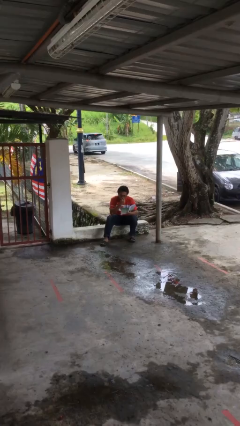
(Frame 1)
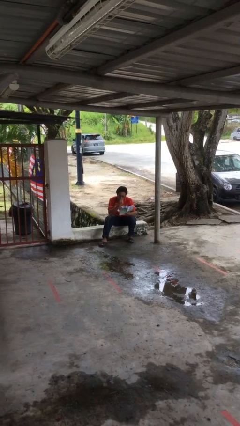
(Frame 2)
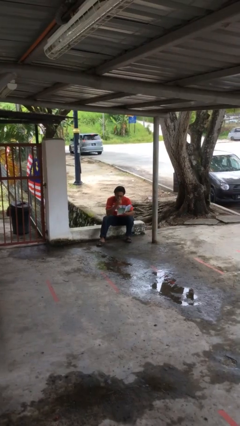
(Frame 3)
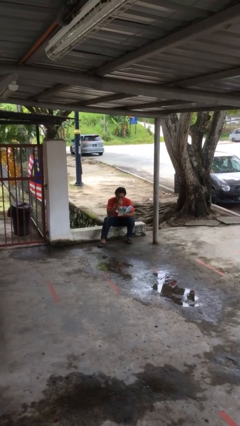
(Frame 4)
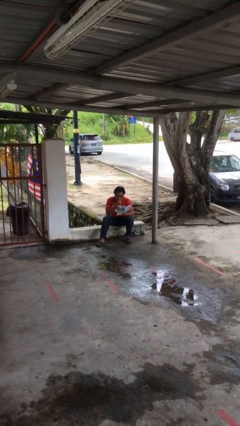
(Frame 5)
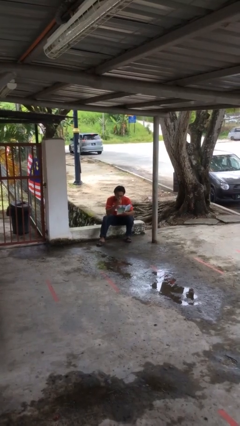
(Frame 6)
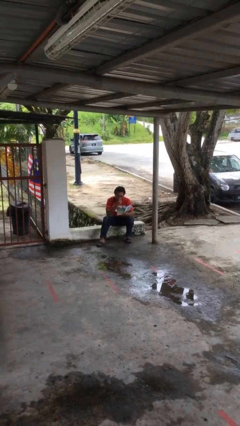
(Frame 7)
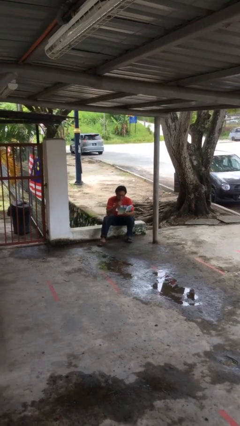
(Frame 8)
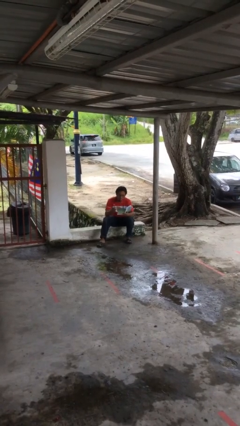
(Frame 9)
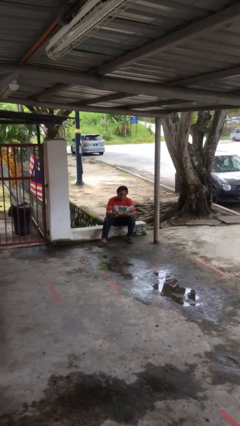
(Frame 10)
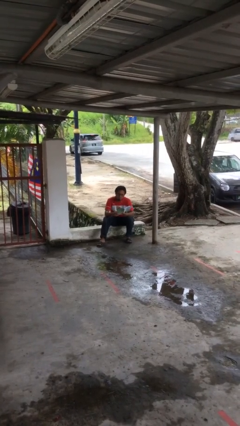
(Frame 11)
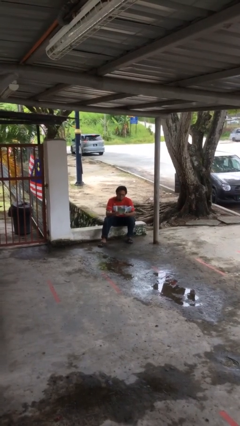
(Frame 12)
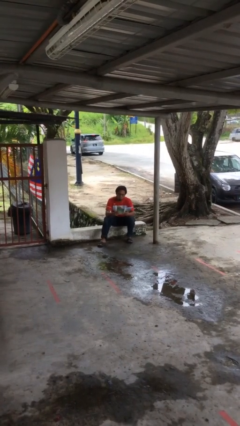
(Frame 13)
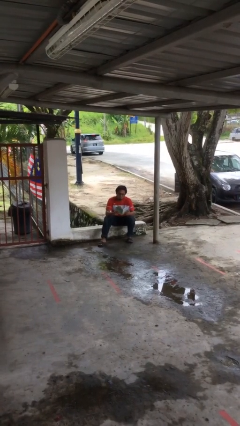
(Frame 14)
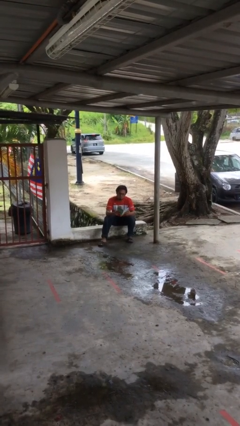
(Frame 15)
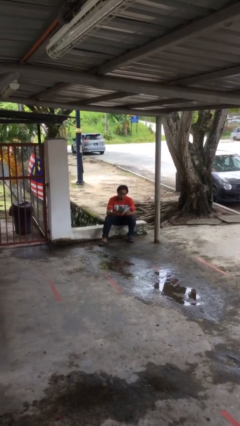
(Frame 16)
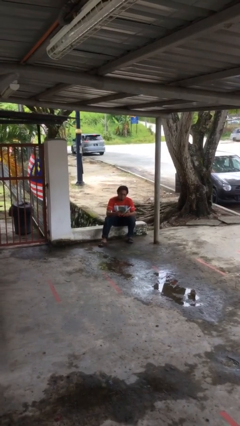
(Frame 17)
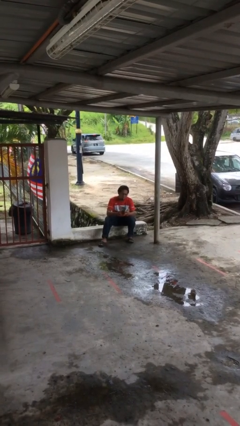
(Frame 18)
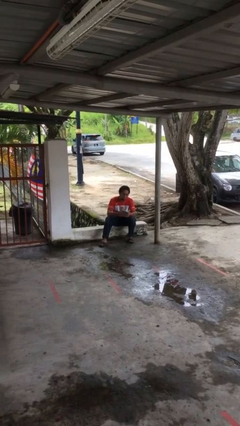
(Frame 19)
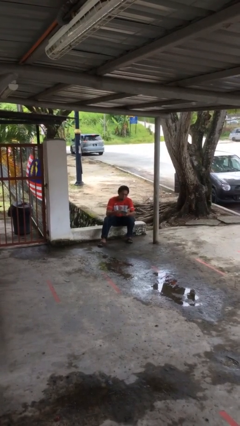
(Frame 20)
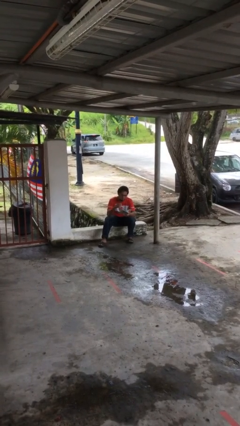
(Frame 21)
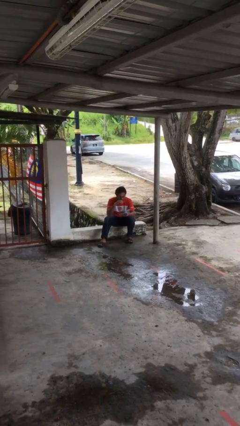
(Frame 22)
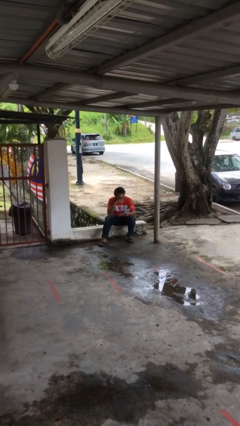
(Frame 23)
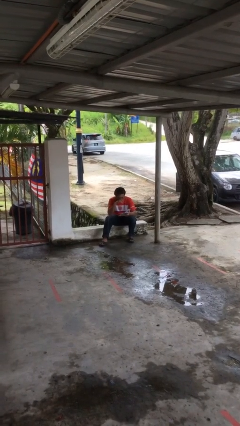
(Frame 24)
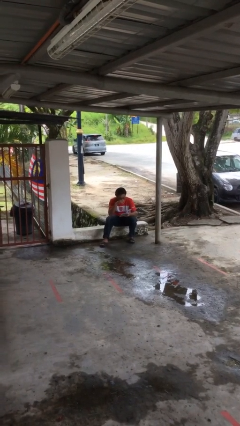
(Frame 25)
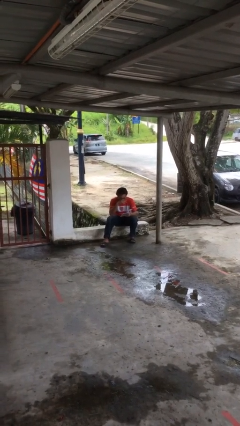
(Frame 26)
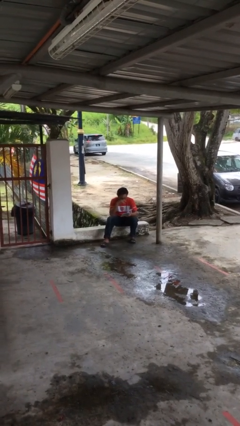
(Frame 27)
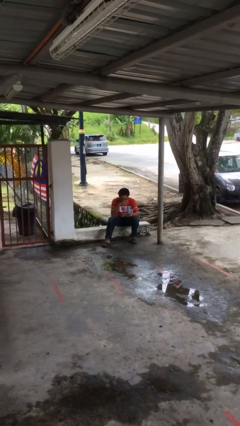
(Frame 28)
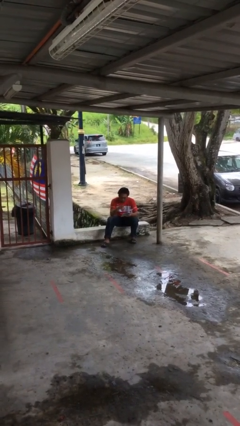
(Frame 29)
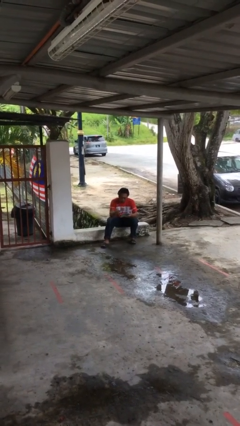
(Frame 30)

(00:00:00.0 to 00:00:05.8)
person reads document

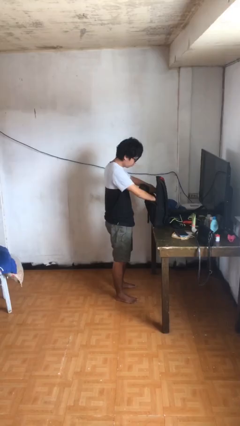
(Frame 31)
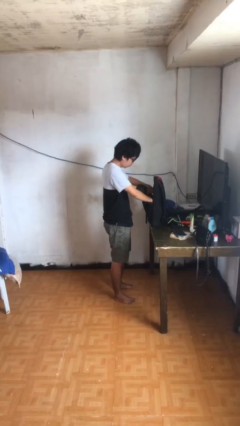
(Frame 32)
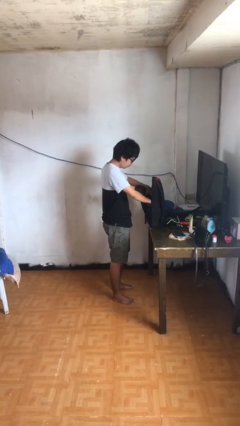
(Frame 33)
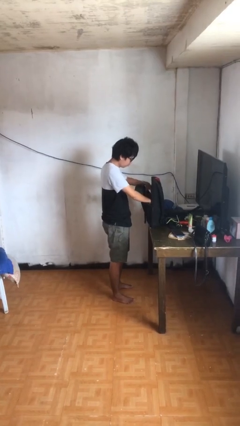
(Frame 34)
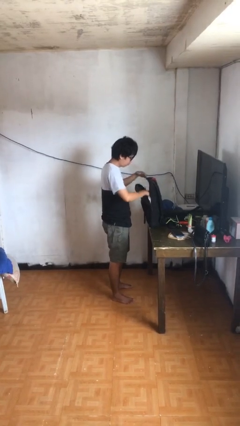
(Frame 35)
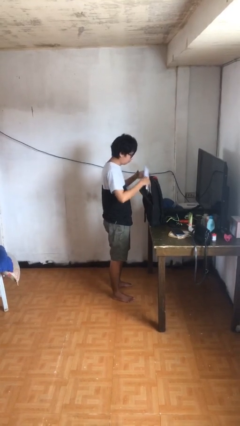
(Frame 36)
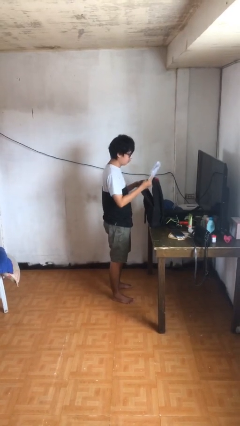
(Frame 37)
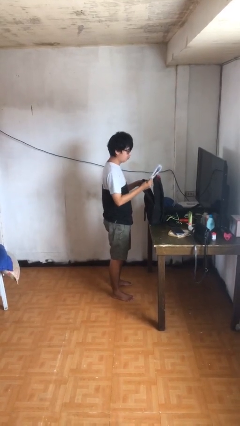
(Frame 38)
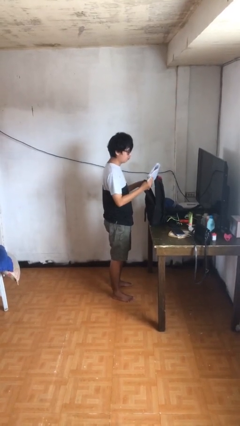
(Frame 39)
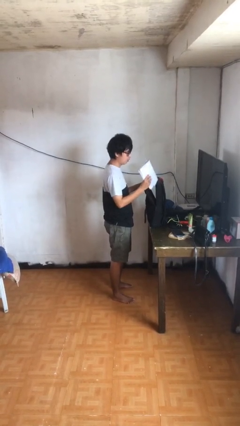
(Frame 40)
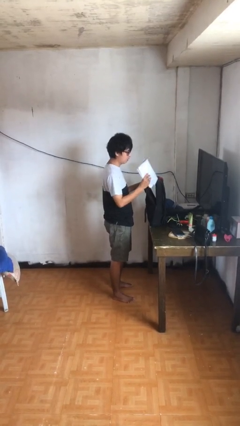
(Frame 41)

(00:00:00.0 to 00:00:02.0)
person takes object from backpack

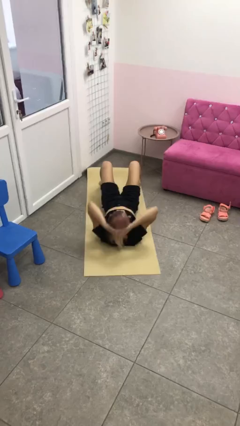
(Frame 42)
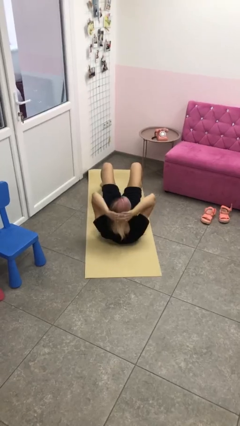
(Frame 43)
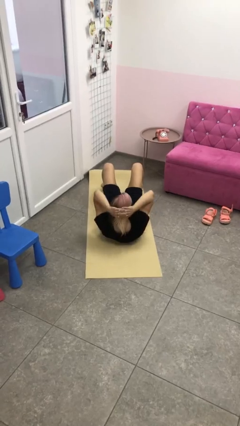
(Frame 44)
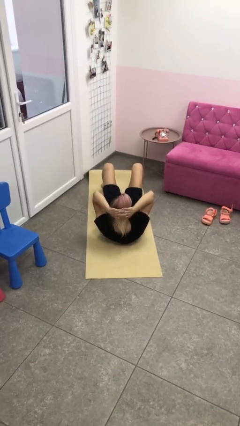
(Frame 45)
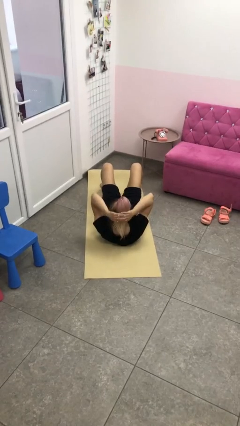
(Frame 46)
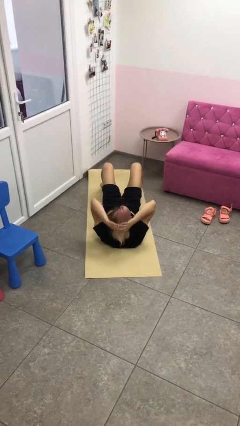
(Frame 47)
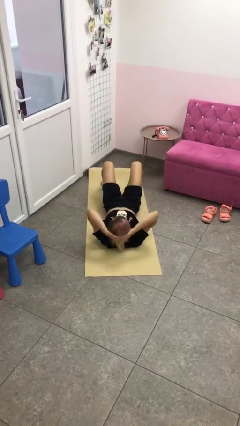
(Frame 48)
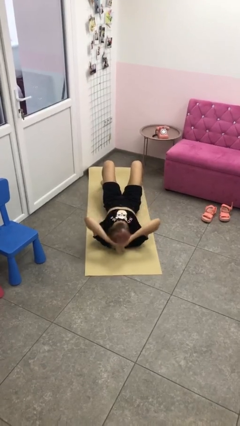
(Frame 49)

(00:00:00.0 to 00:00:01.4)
person exercises with situp

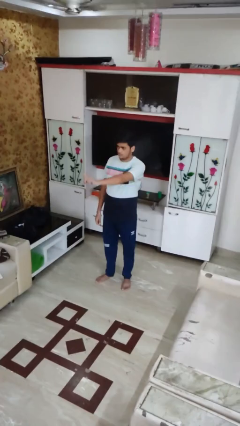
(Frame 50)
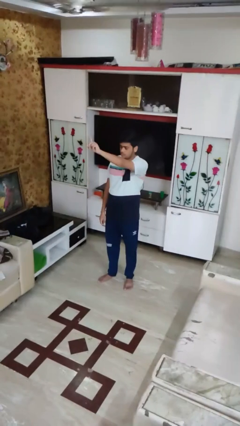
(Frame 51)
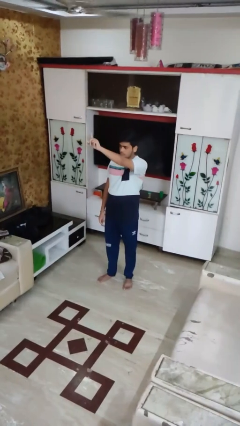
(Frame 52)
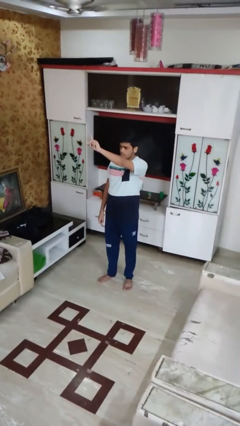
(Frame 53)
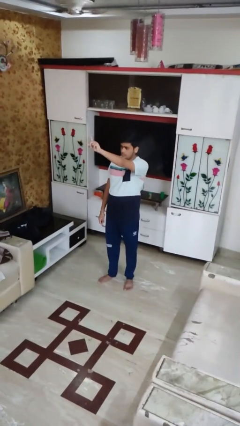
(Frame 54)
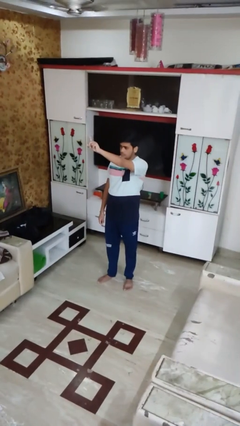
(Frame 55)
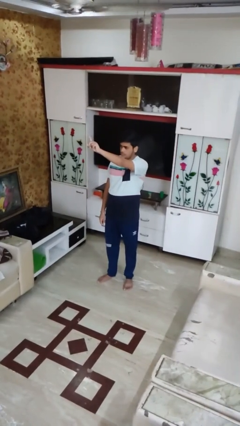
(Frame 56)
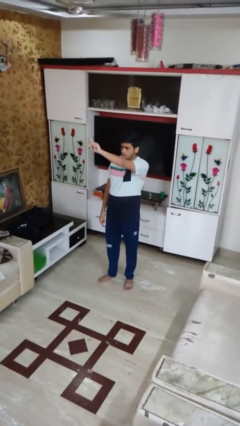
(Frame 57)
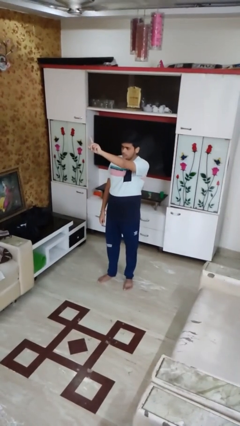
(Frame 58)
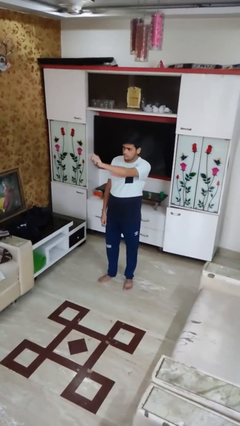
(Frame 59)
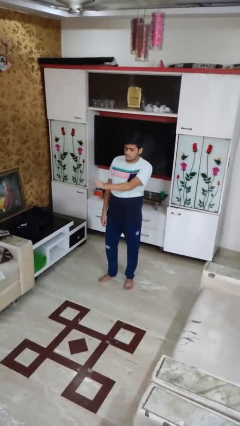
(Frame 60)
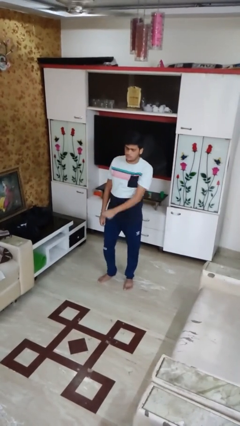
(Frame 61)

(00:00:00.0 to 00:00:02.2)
person gestures number one

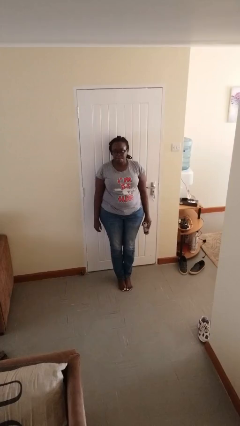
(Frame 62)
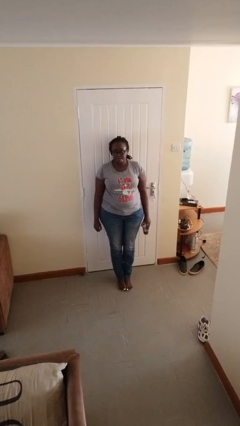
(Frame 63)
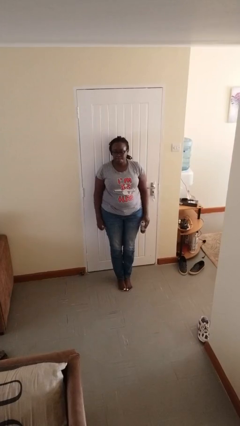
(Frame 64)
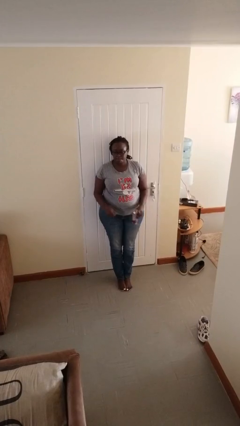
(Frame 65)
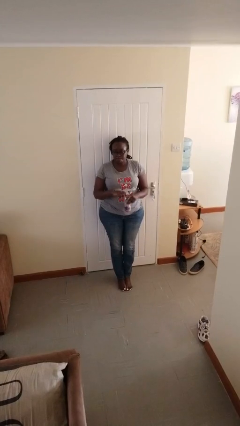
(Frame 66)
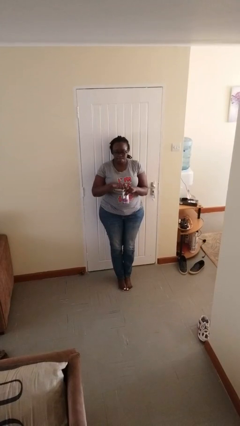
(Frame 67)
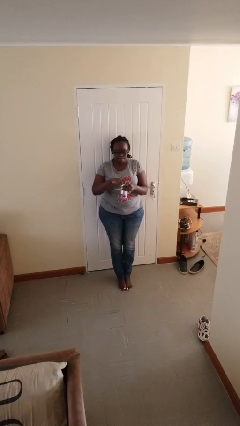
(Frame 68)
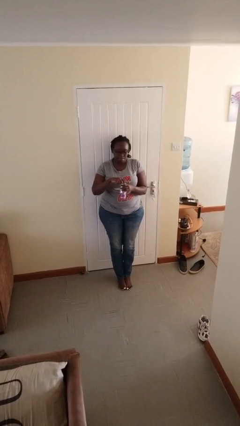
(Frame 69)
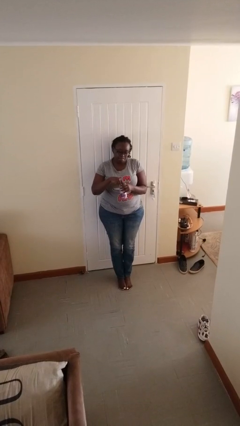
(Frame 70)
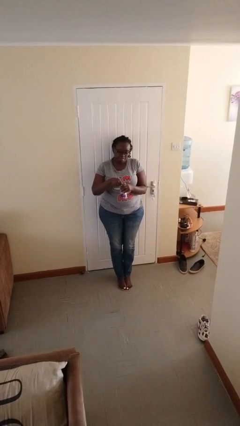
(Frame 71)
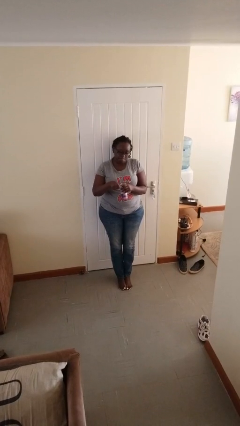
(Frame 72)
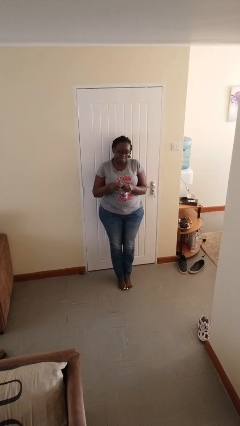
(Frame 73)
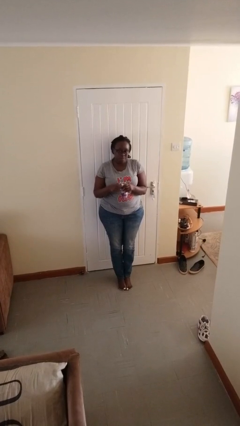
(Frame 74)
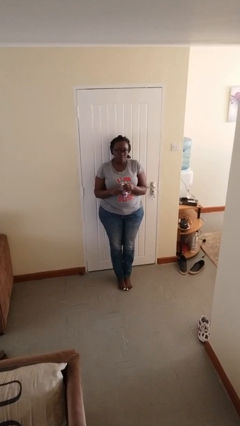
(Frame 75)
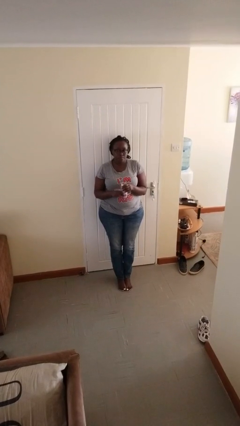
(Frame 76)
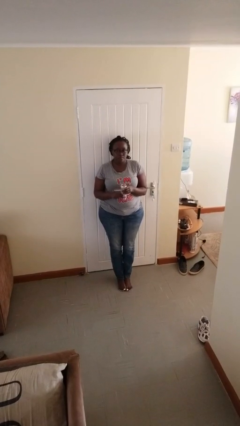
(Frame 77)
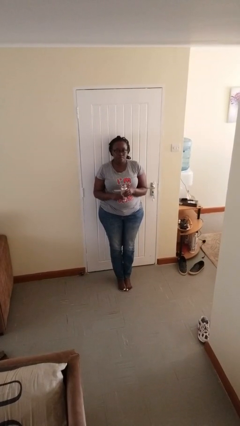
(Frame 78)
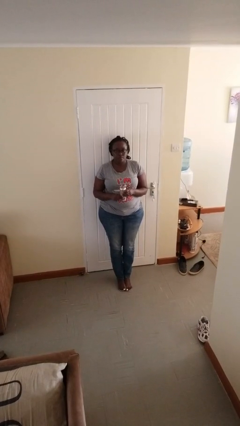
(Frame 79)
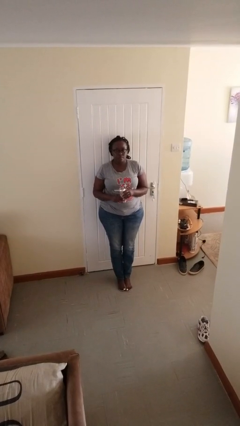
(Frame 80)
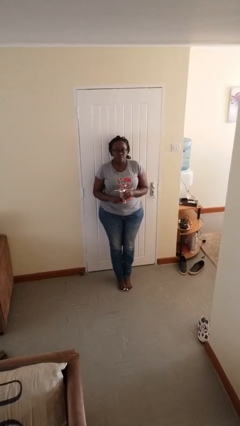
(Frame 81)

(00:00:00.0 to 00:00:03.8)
person opens beverage can

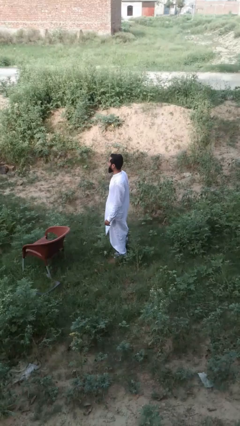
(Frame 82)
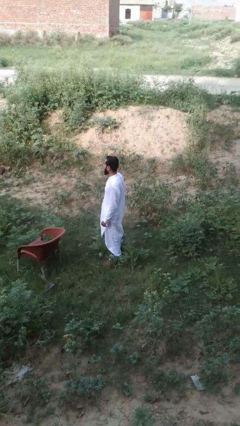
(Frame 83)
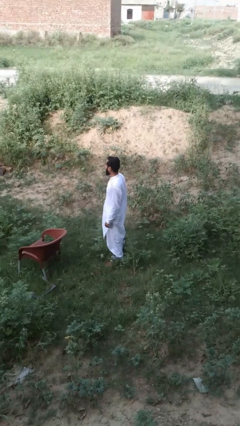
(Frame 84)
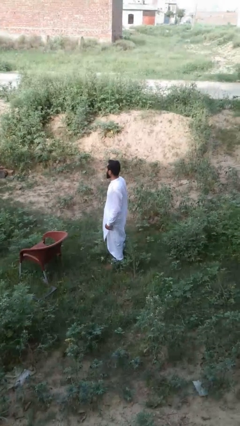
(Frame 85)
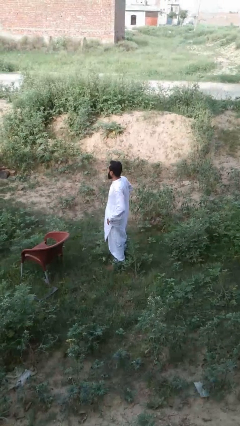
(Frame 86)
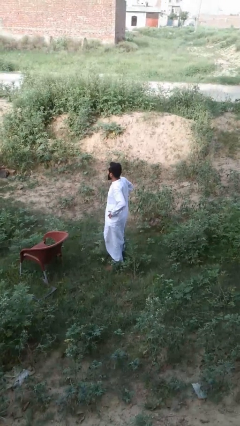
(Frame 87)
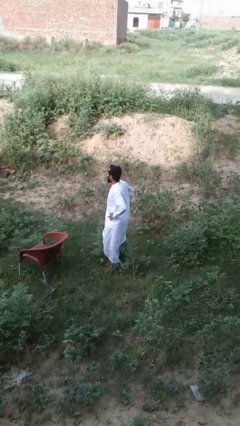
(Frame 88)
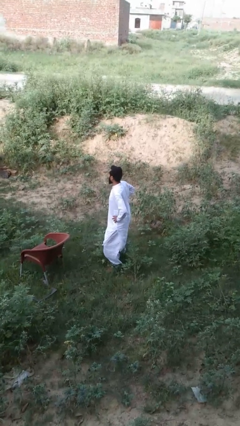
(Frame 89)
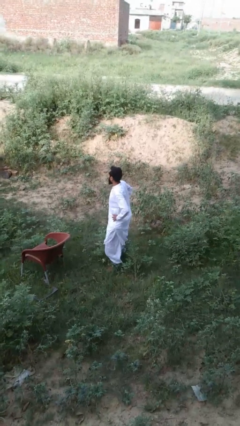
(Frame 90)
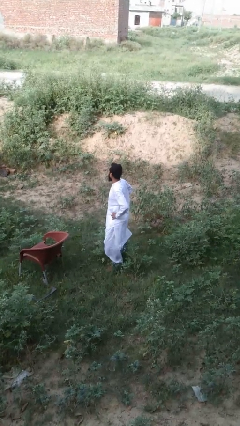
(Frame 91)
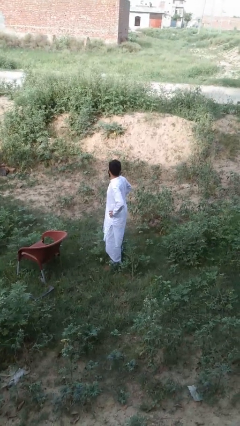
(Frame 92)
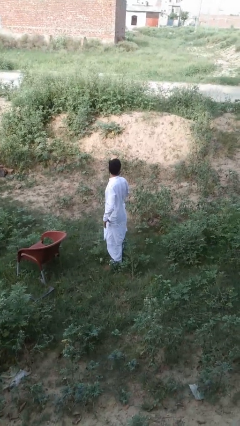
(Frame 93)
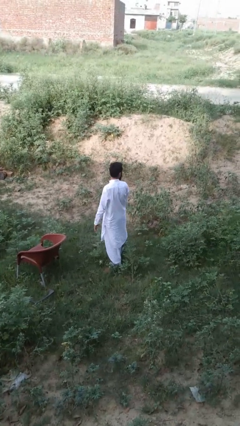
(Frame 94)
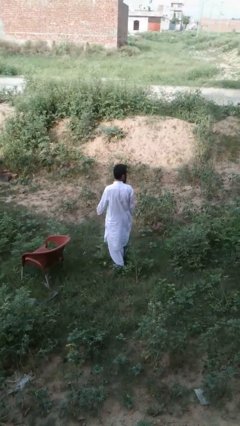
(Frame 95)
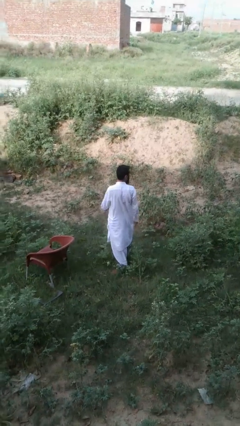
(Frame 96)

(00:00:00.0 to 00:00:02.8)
person wiggles hips
